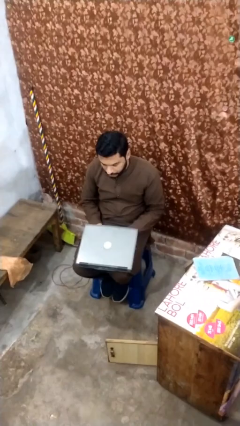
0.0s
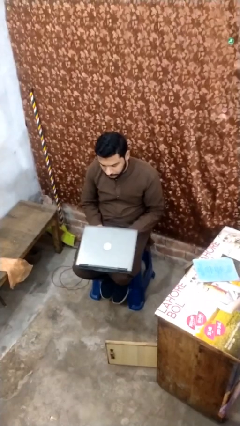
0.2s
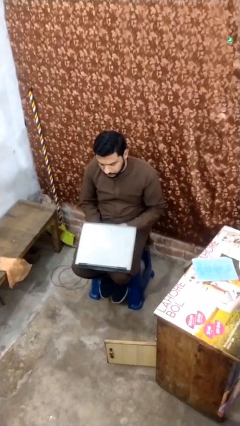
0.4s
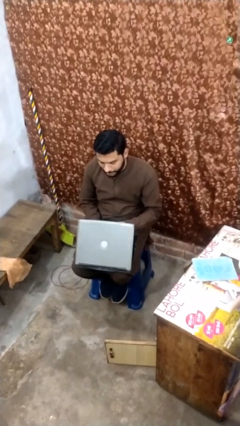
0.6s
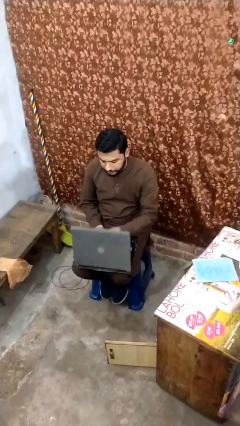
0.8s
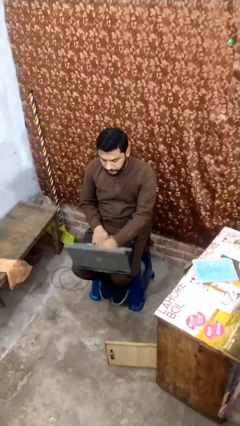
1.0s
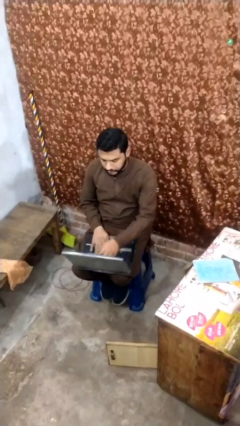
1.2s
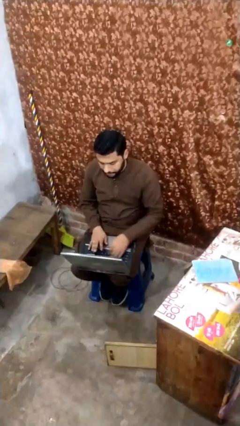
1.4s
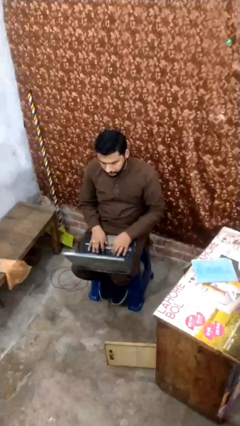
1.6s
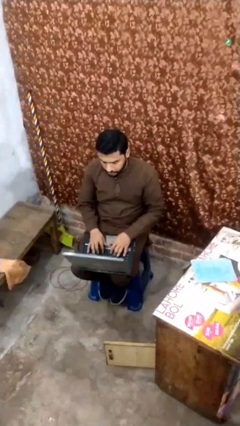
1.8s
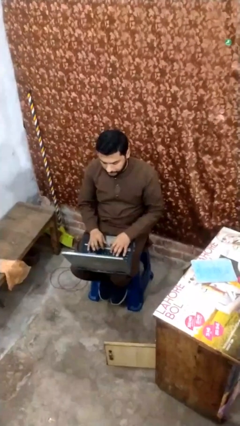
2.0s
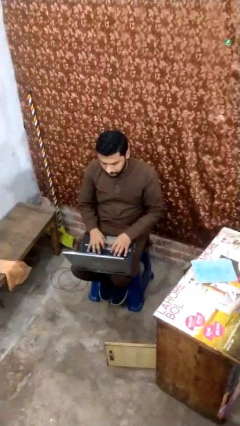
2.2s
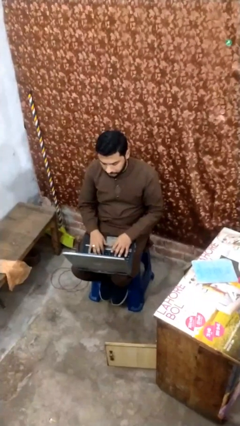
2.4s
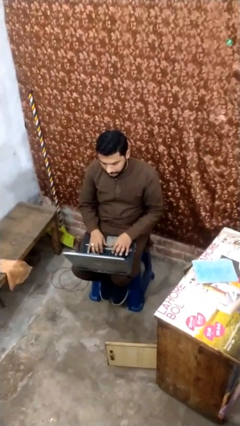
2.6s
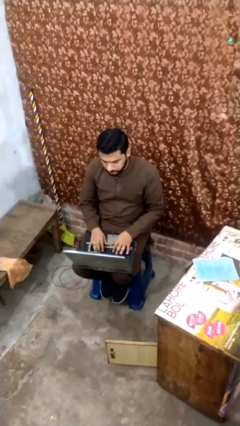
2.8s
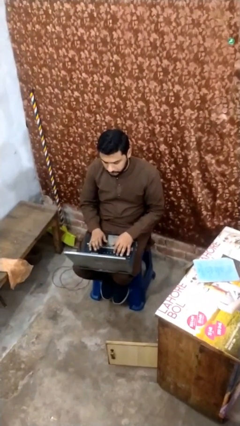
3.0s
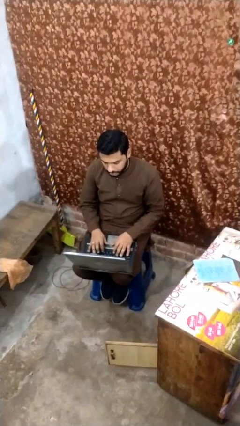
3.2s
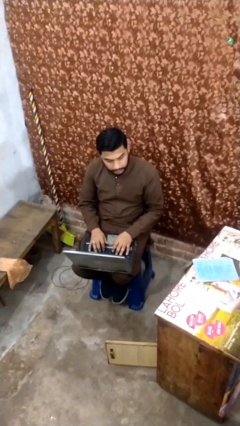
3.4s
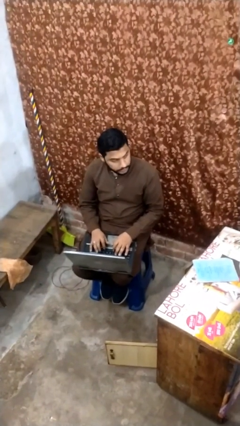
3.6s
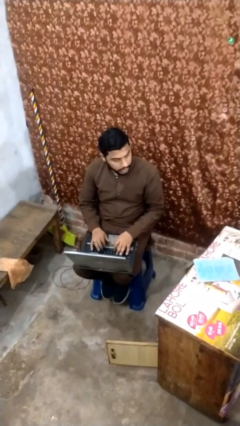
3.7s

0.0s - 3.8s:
person interacts with laptop

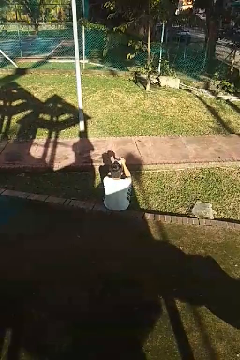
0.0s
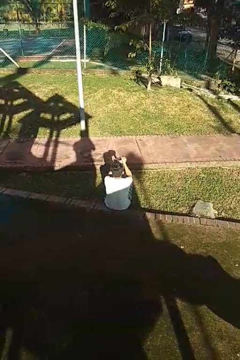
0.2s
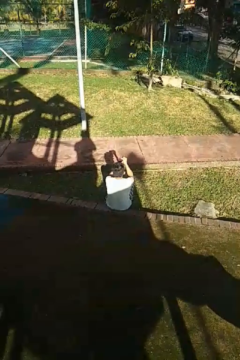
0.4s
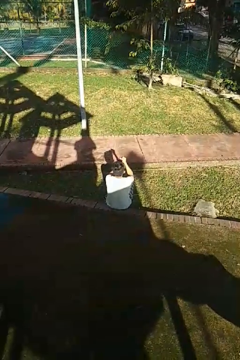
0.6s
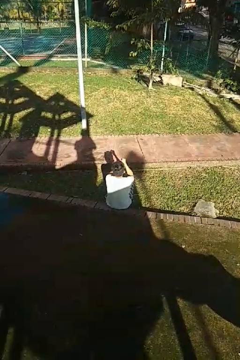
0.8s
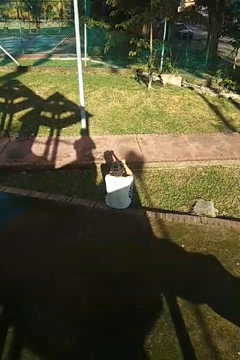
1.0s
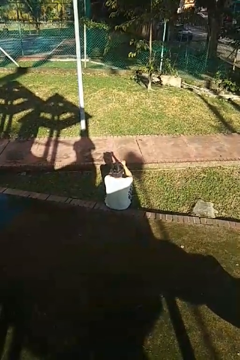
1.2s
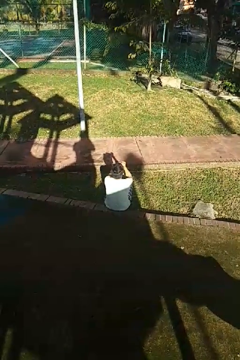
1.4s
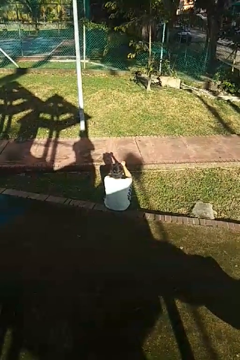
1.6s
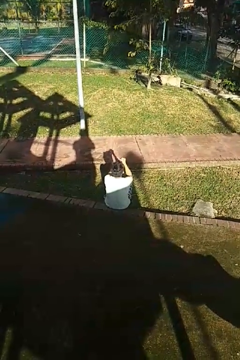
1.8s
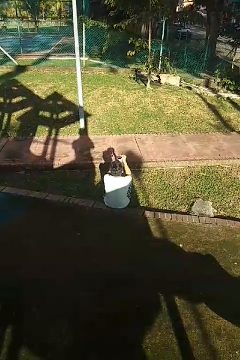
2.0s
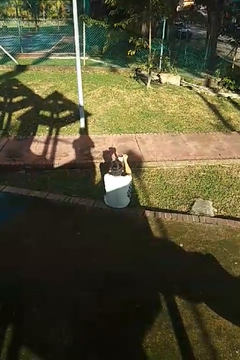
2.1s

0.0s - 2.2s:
person drinks from mug

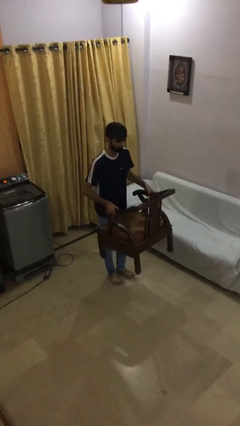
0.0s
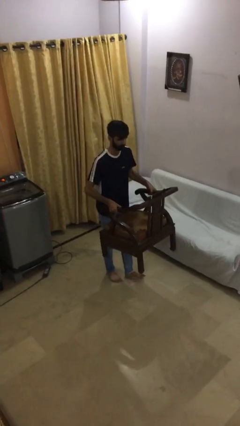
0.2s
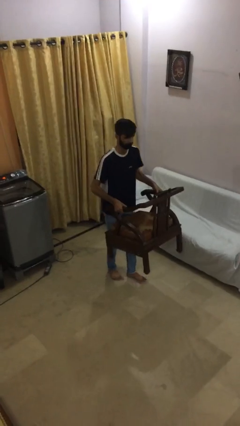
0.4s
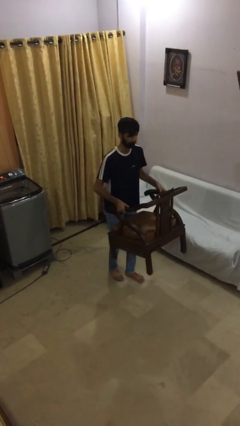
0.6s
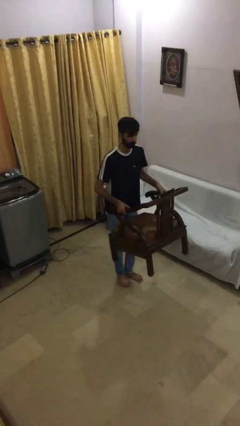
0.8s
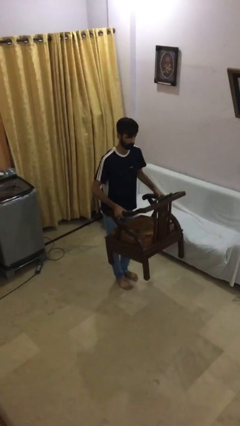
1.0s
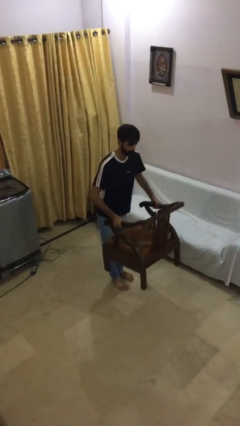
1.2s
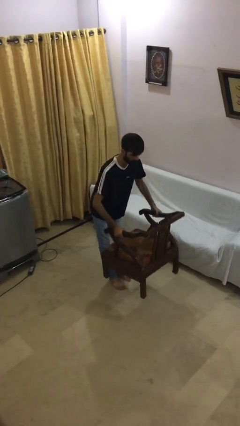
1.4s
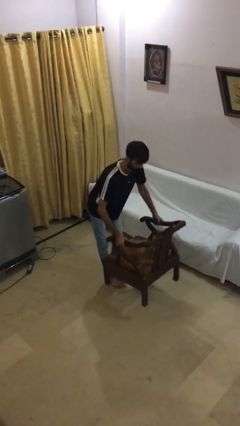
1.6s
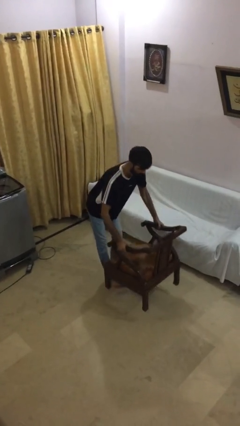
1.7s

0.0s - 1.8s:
person puts down object on floor

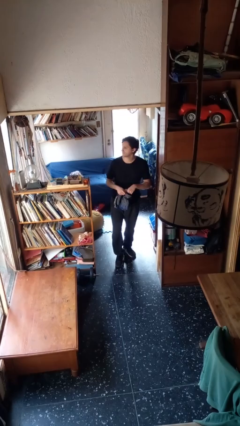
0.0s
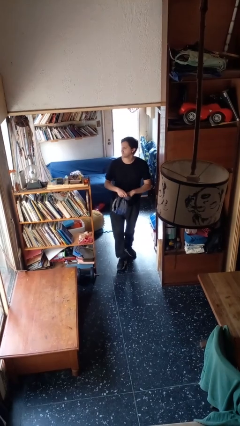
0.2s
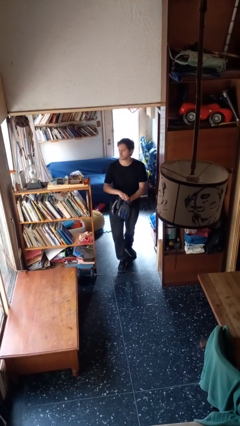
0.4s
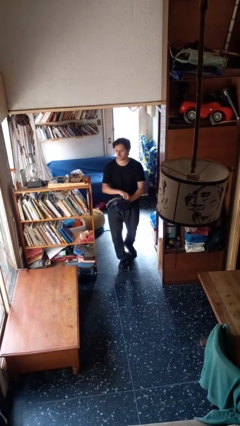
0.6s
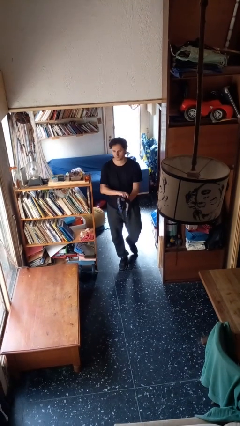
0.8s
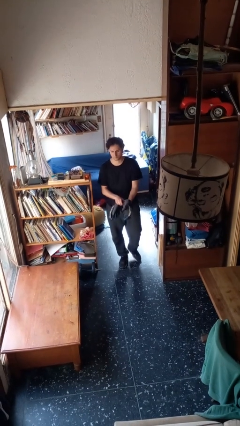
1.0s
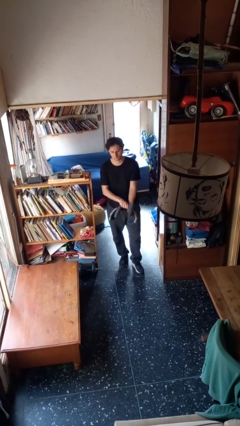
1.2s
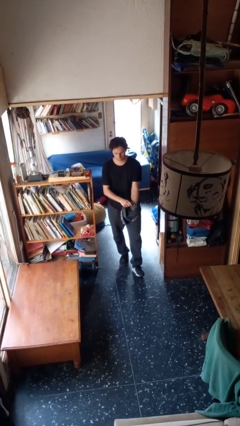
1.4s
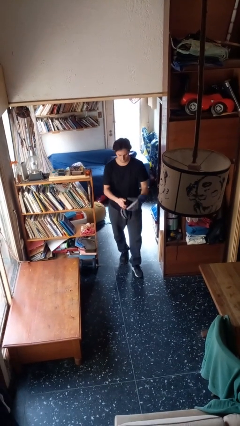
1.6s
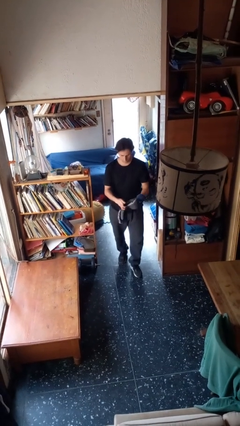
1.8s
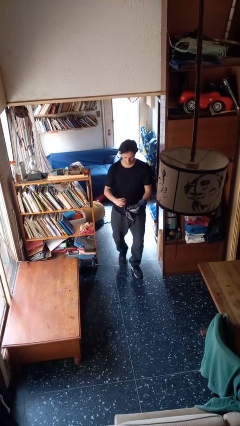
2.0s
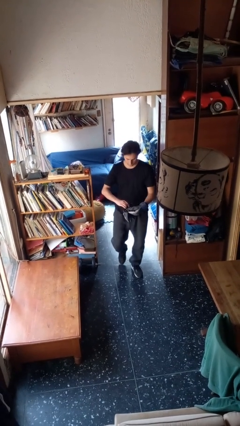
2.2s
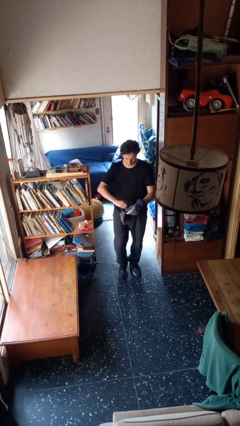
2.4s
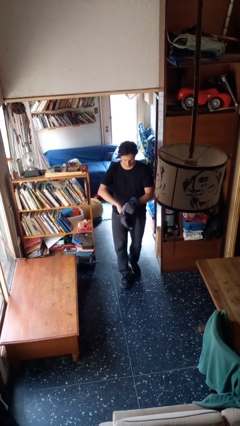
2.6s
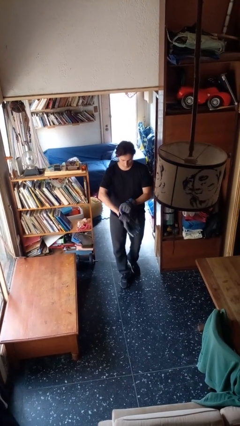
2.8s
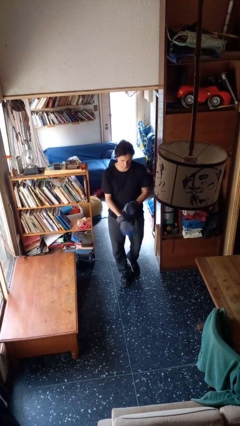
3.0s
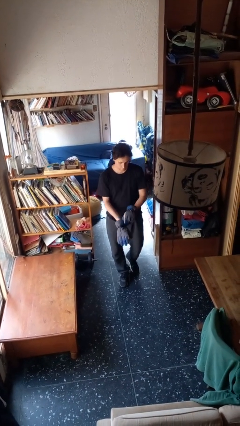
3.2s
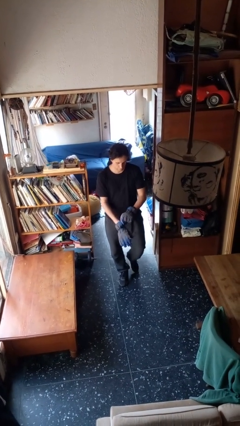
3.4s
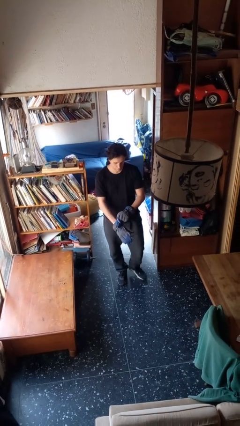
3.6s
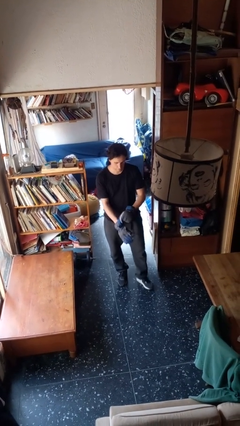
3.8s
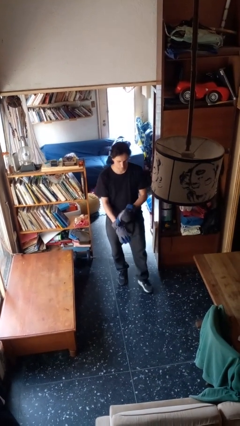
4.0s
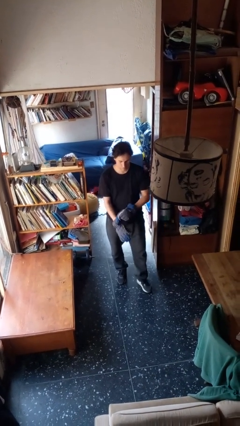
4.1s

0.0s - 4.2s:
person puts on gloves

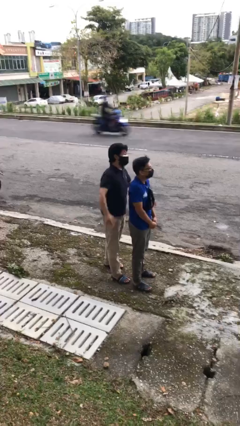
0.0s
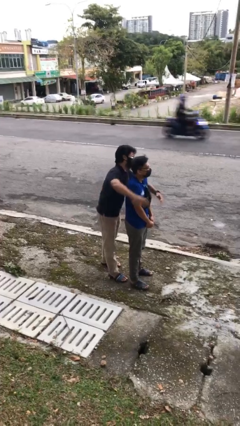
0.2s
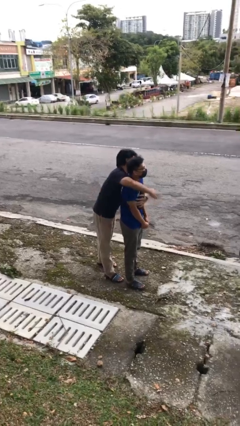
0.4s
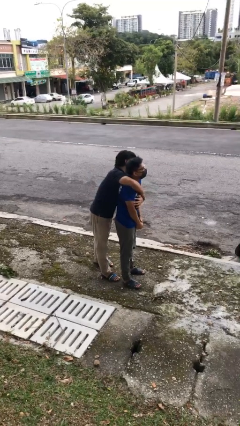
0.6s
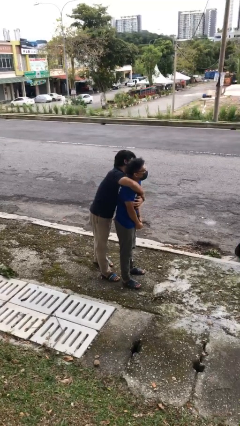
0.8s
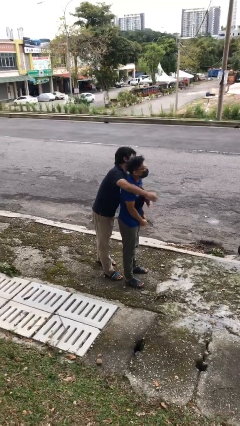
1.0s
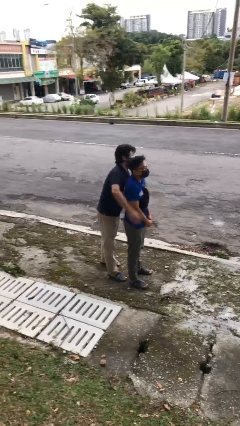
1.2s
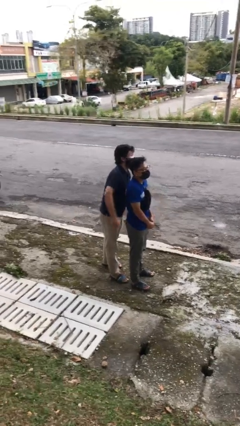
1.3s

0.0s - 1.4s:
person hugs person from behind

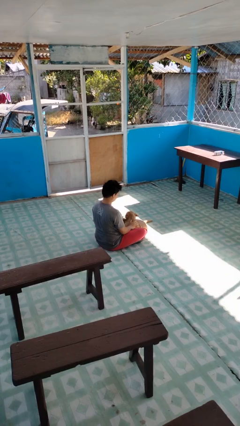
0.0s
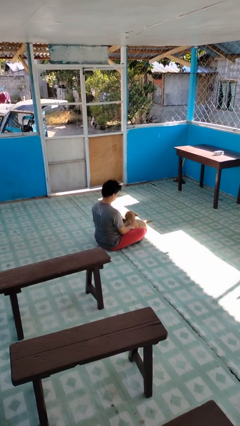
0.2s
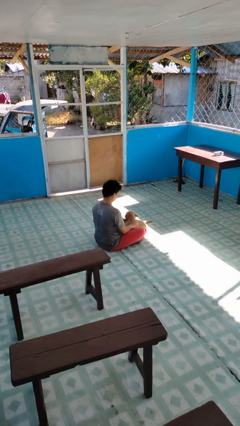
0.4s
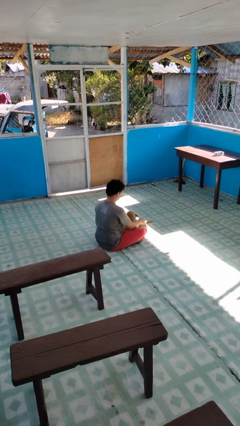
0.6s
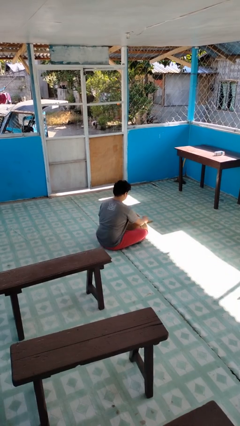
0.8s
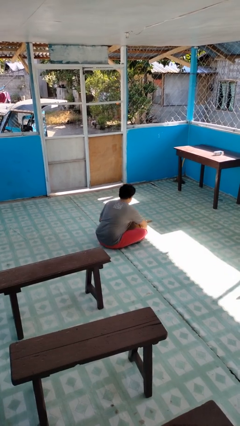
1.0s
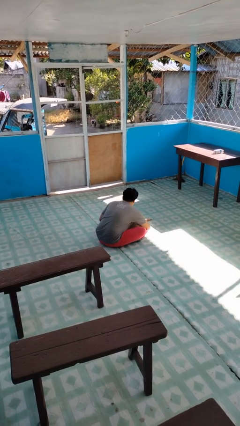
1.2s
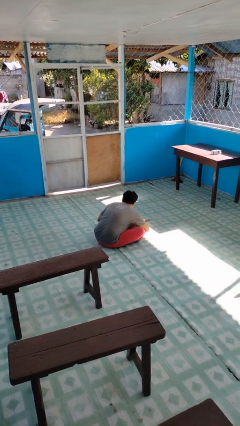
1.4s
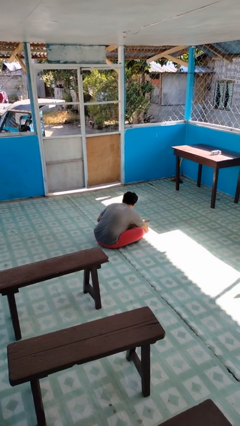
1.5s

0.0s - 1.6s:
person hugs dog

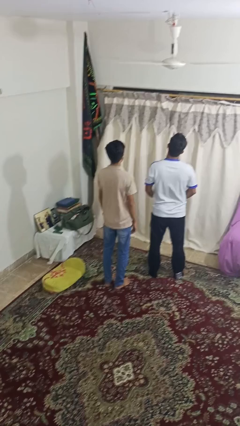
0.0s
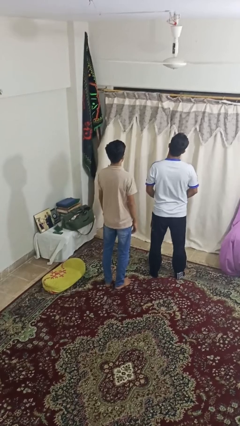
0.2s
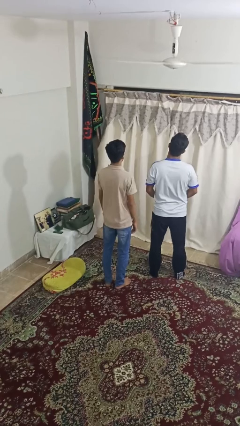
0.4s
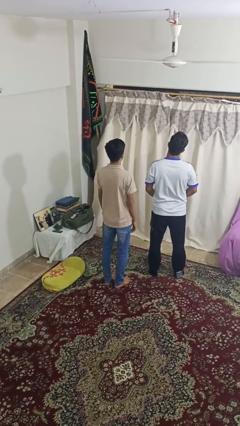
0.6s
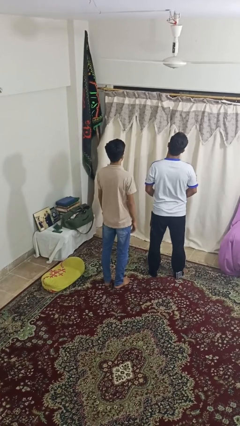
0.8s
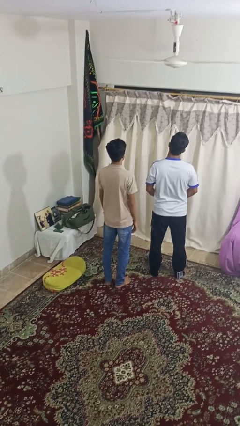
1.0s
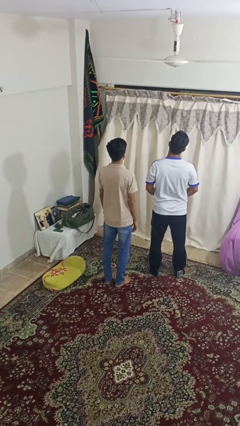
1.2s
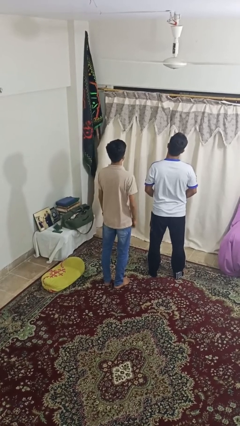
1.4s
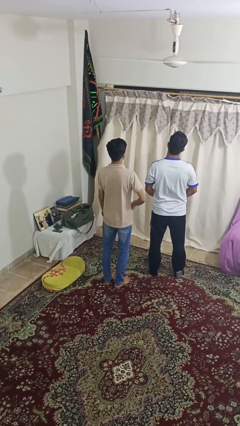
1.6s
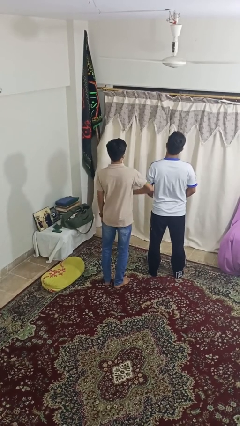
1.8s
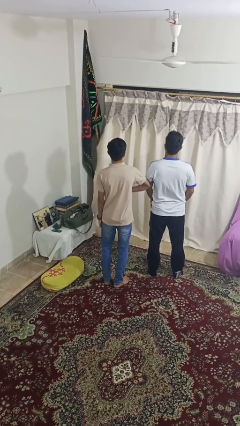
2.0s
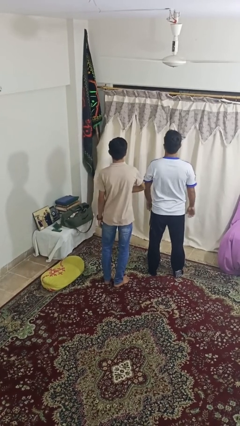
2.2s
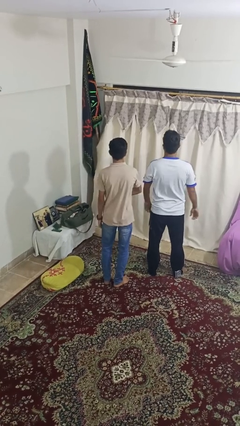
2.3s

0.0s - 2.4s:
person nudges person with elbow

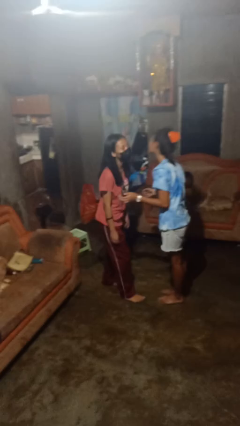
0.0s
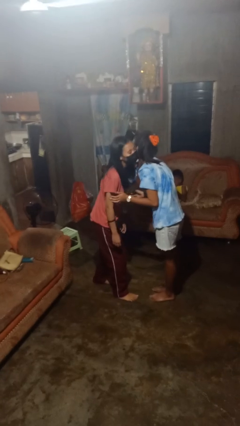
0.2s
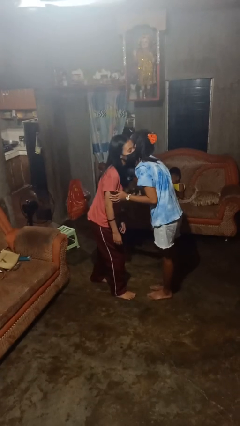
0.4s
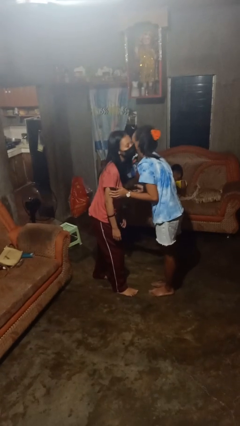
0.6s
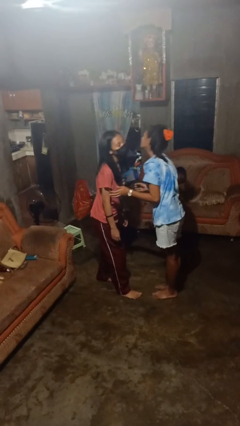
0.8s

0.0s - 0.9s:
person kisses cheek of person
